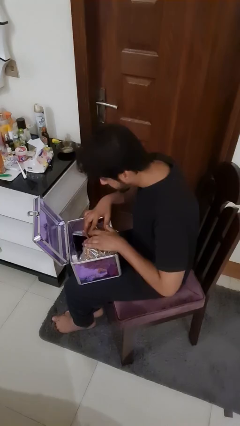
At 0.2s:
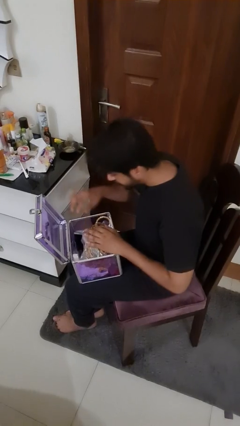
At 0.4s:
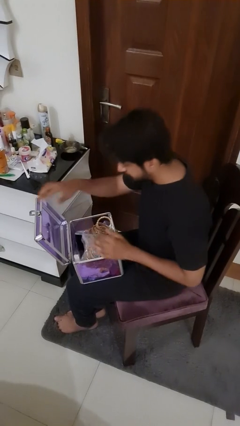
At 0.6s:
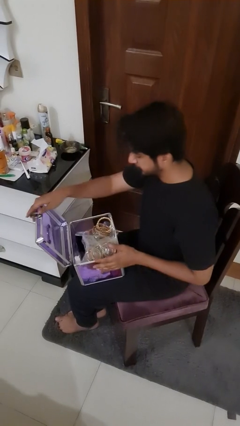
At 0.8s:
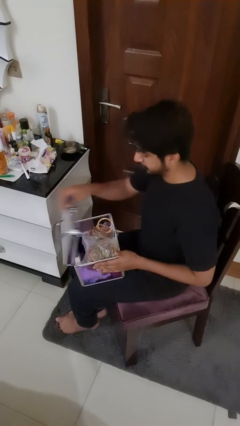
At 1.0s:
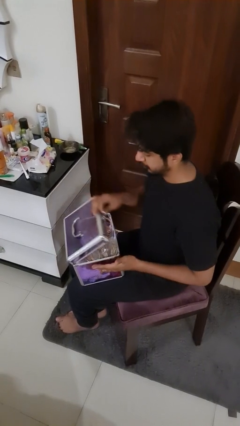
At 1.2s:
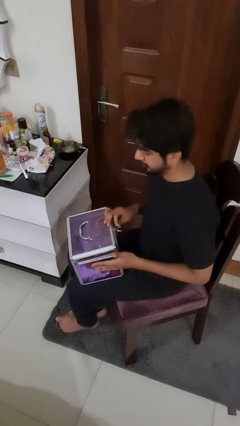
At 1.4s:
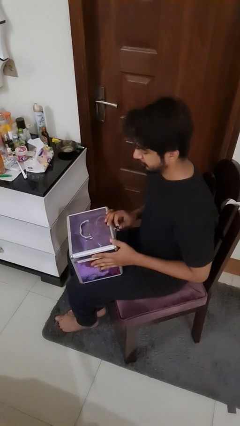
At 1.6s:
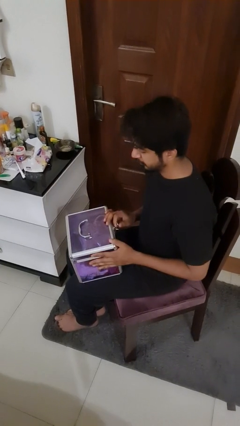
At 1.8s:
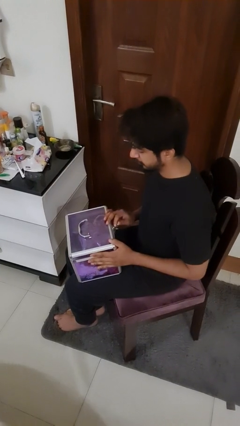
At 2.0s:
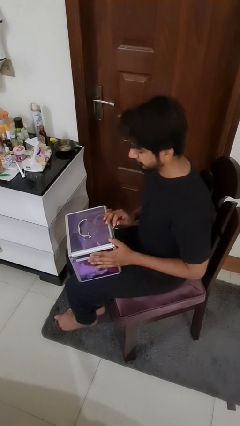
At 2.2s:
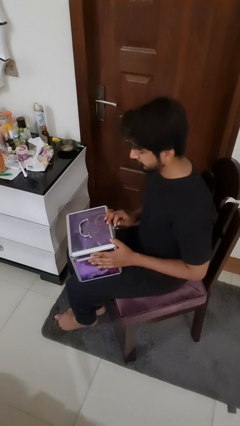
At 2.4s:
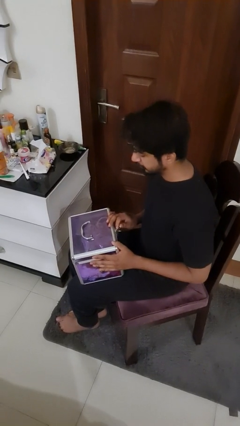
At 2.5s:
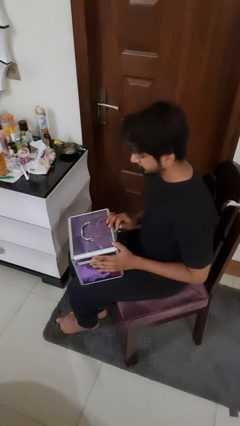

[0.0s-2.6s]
person closes jewelry box

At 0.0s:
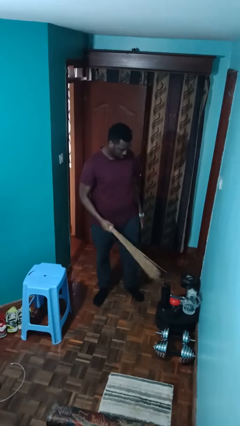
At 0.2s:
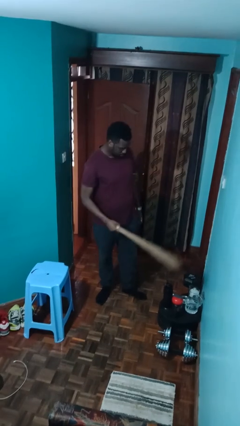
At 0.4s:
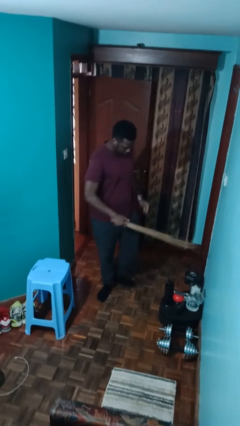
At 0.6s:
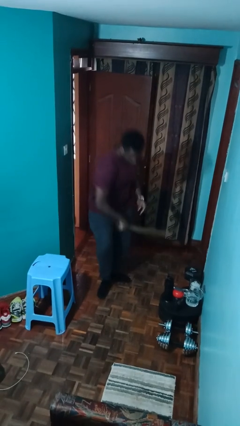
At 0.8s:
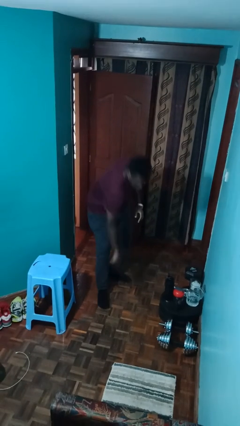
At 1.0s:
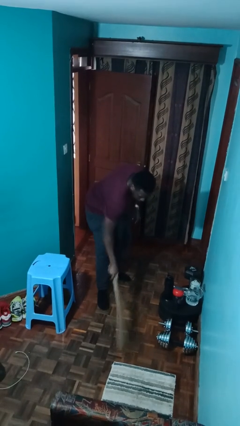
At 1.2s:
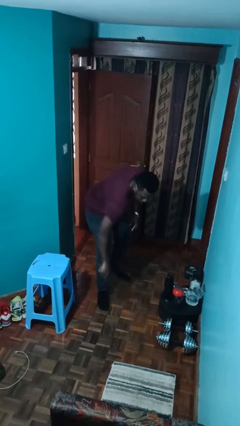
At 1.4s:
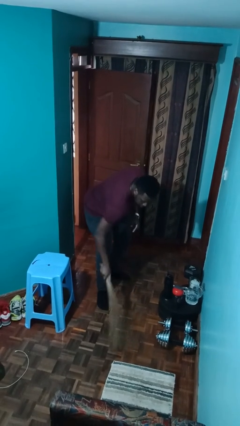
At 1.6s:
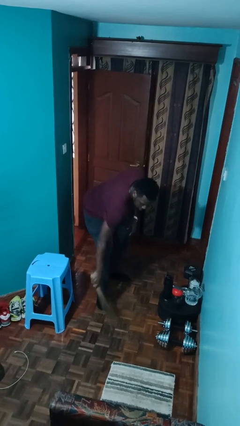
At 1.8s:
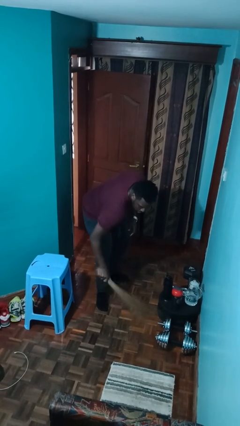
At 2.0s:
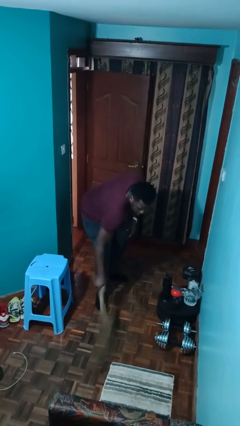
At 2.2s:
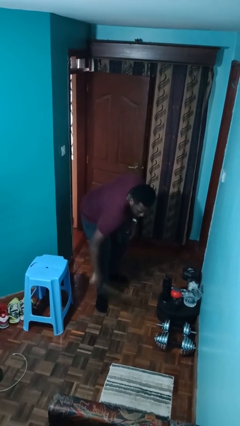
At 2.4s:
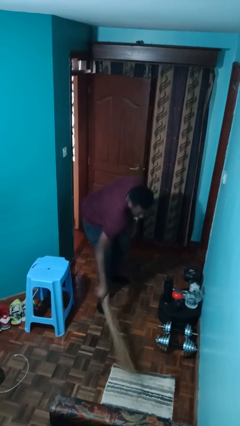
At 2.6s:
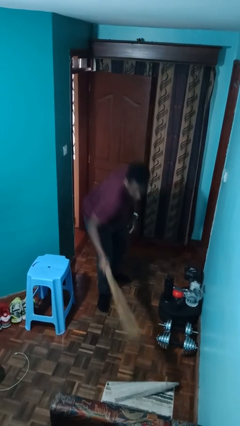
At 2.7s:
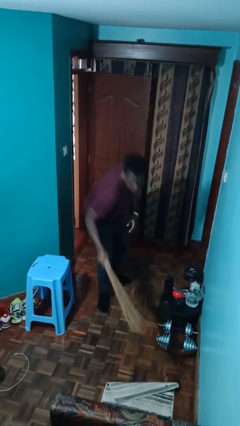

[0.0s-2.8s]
person sweeps floor

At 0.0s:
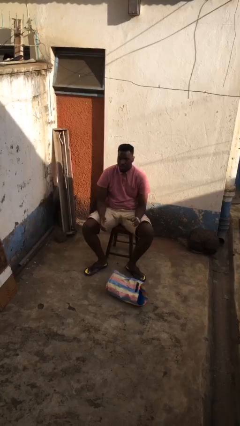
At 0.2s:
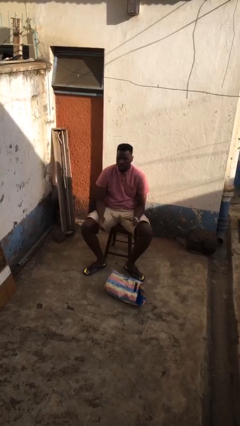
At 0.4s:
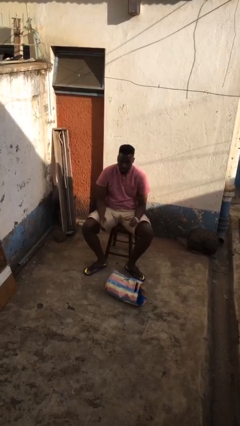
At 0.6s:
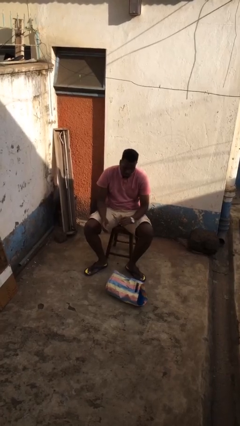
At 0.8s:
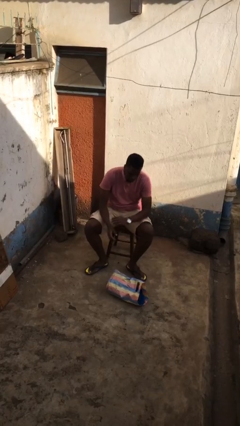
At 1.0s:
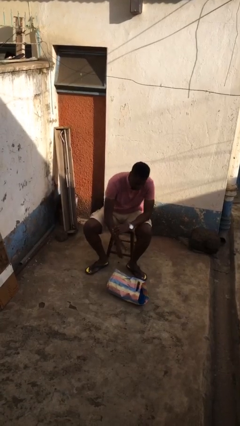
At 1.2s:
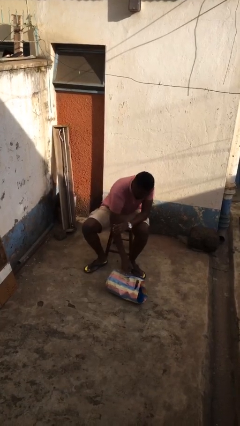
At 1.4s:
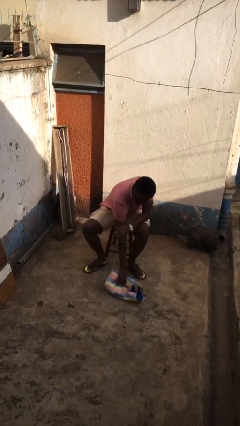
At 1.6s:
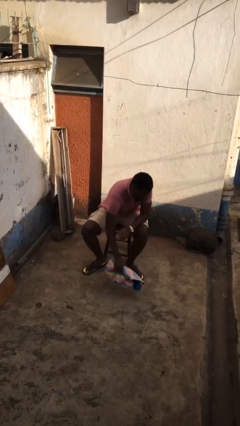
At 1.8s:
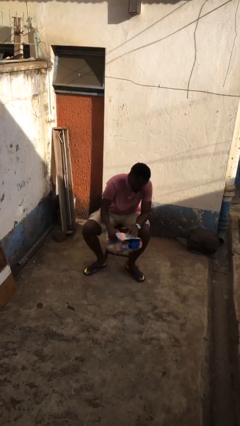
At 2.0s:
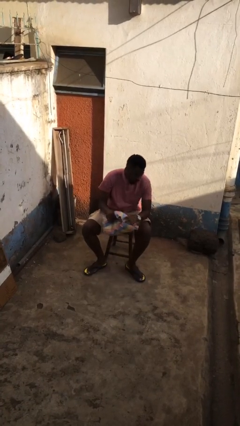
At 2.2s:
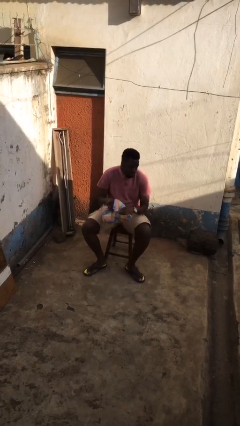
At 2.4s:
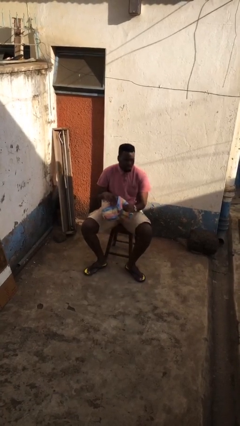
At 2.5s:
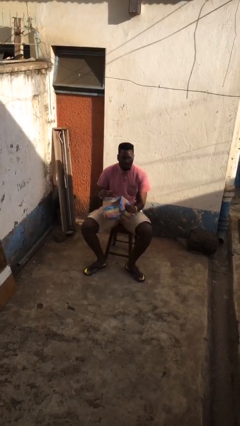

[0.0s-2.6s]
person picks up object from floor

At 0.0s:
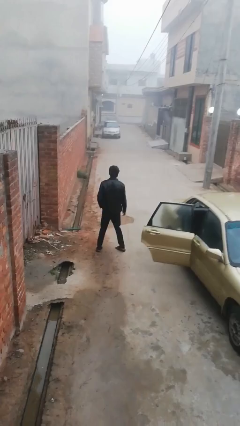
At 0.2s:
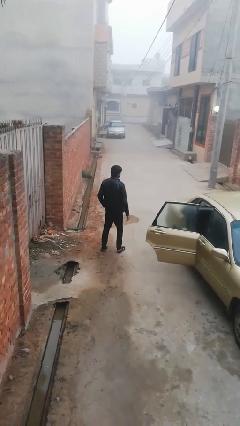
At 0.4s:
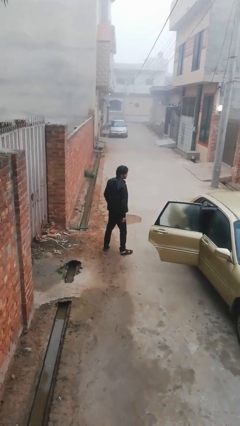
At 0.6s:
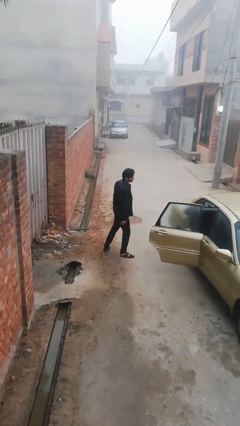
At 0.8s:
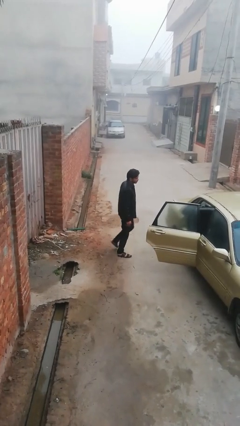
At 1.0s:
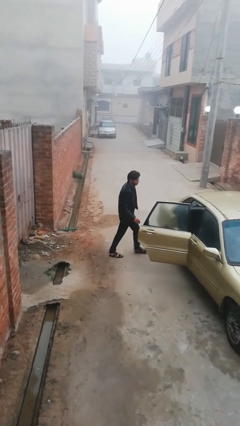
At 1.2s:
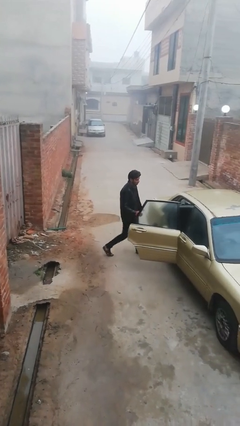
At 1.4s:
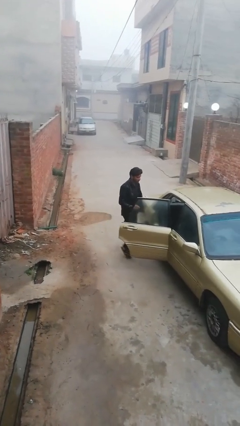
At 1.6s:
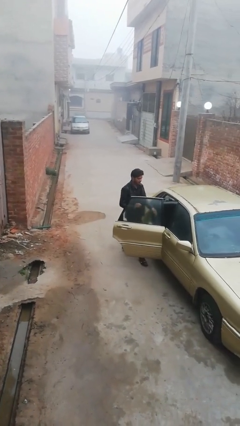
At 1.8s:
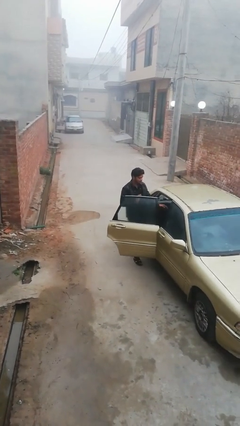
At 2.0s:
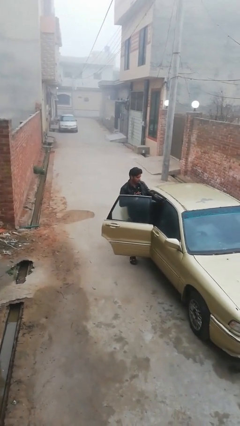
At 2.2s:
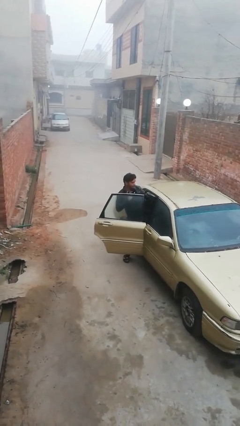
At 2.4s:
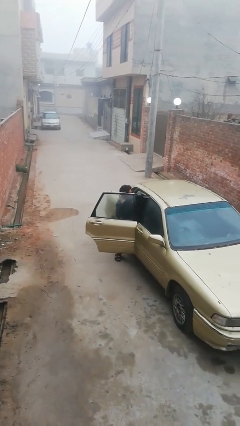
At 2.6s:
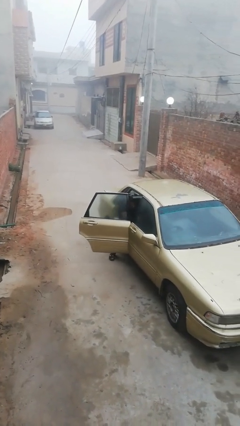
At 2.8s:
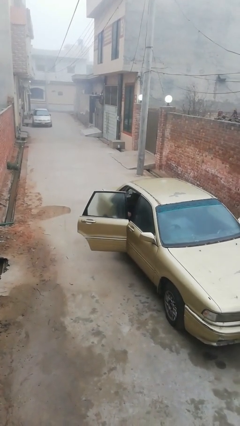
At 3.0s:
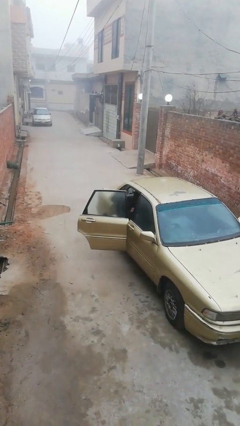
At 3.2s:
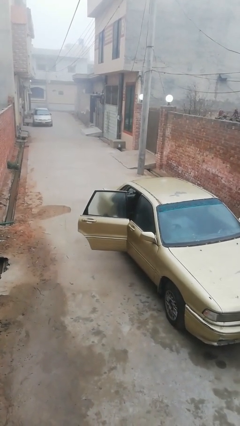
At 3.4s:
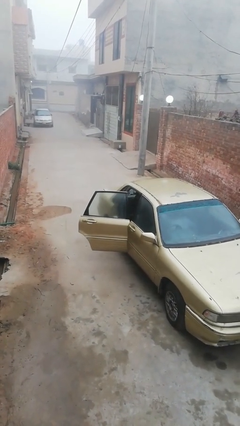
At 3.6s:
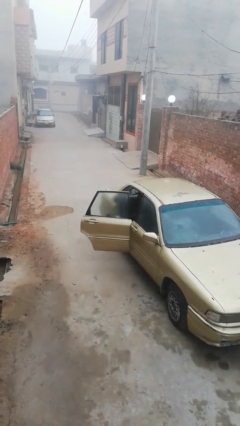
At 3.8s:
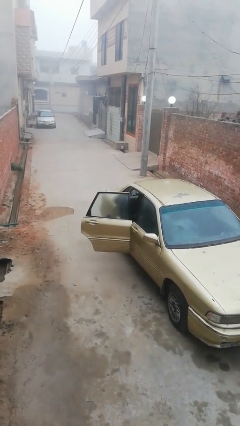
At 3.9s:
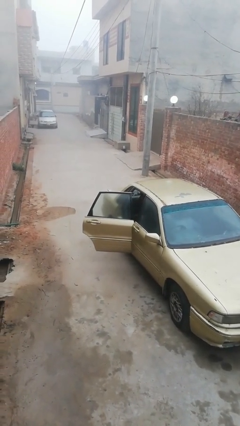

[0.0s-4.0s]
person enters car

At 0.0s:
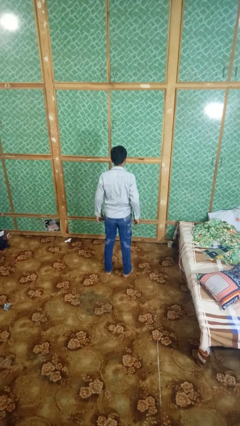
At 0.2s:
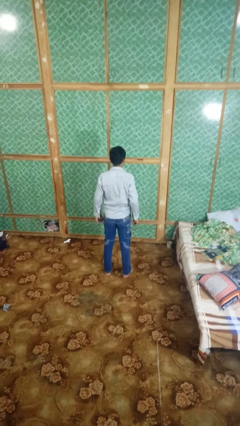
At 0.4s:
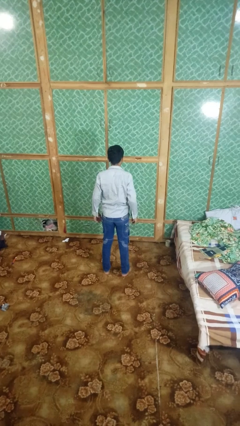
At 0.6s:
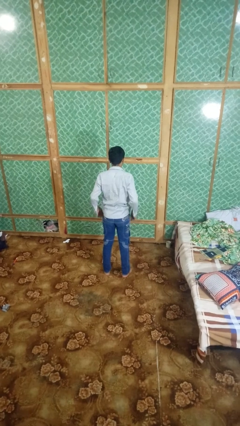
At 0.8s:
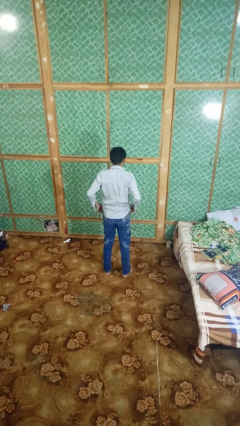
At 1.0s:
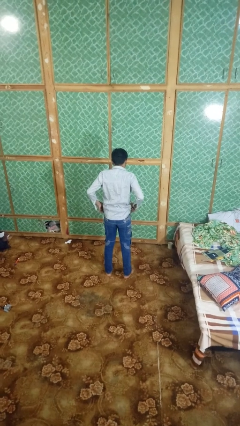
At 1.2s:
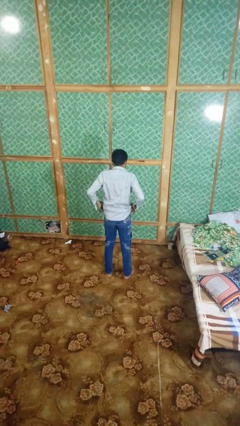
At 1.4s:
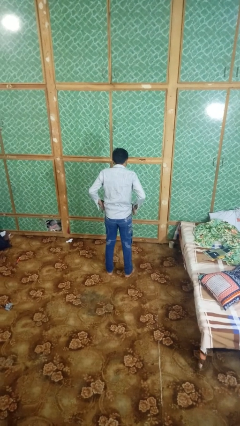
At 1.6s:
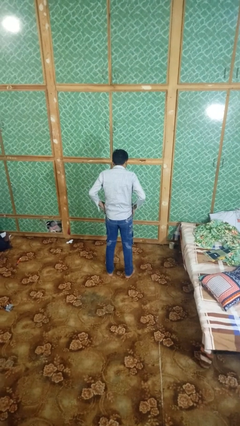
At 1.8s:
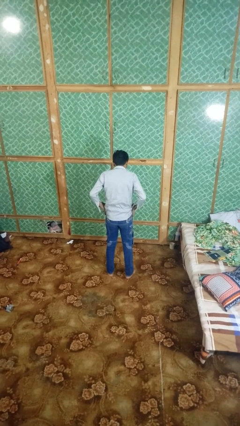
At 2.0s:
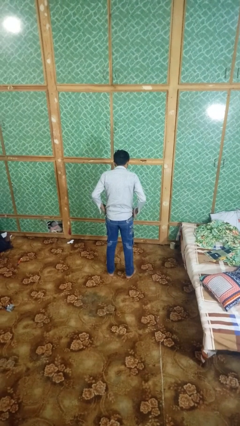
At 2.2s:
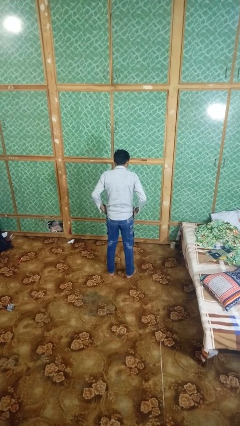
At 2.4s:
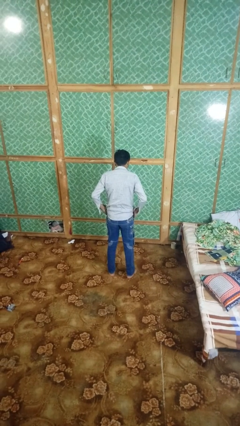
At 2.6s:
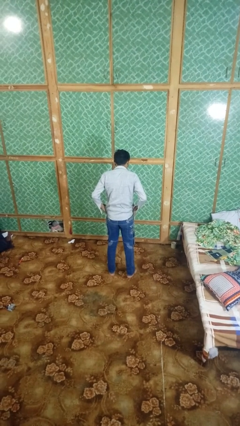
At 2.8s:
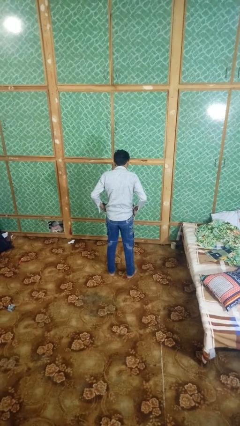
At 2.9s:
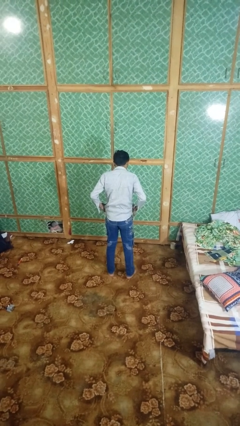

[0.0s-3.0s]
person puts hands in back pockets

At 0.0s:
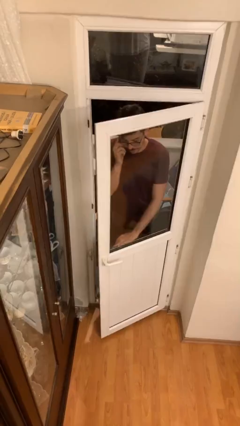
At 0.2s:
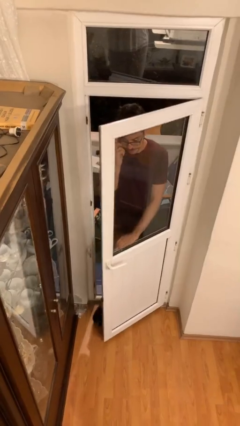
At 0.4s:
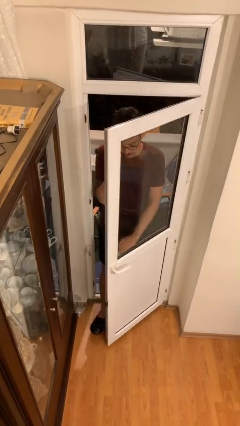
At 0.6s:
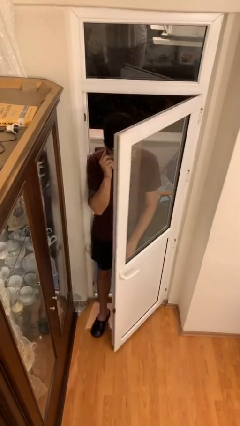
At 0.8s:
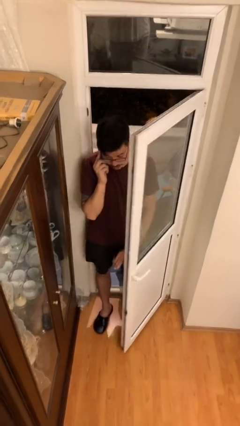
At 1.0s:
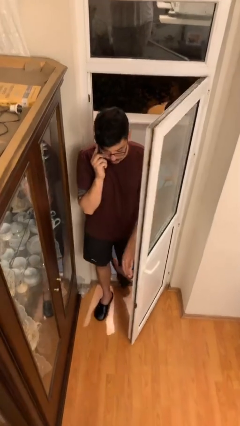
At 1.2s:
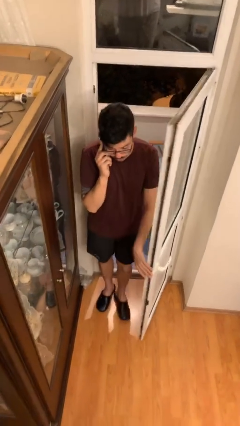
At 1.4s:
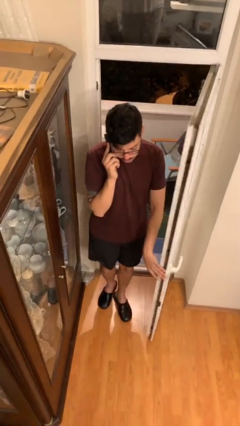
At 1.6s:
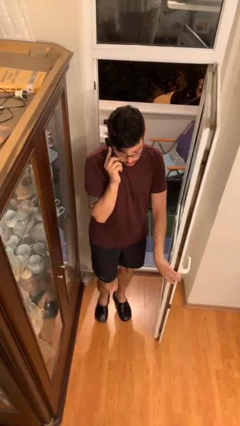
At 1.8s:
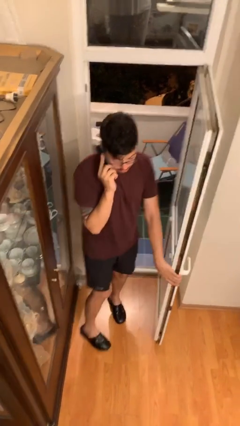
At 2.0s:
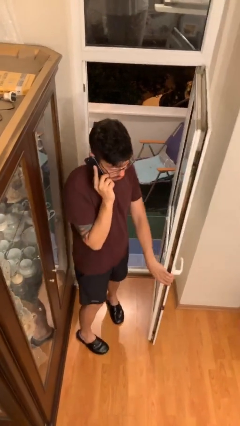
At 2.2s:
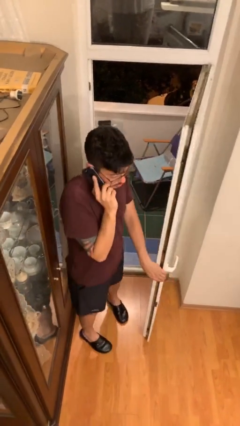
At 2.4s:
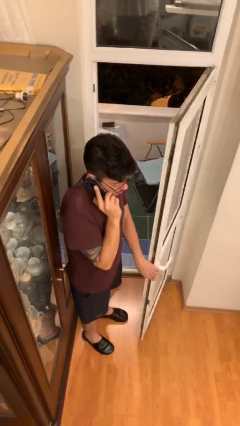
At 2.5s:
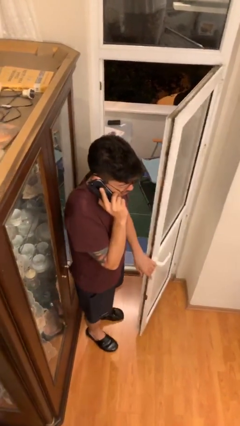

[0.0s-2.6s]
person enters scene through structure
